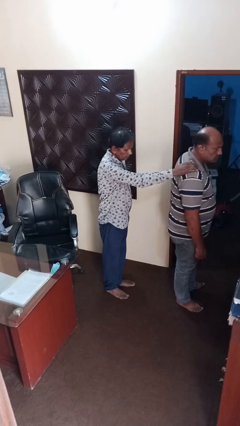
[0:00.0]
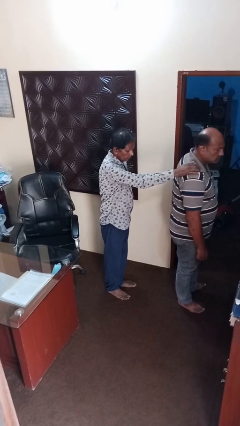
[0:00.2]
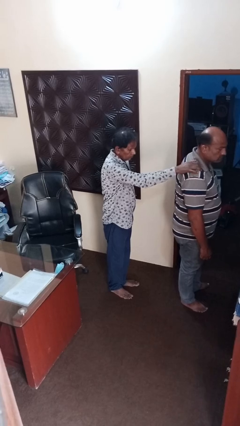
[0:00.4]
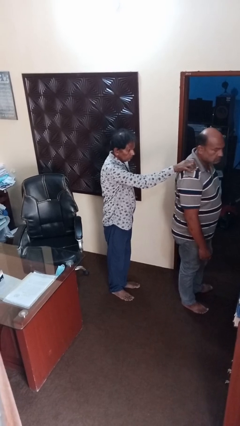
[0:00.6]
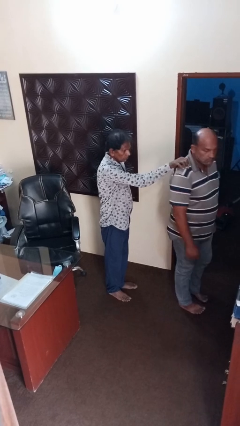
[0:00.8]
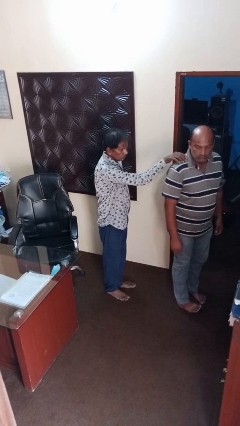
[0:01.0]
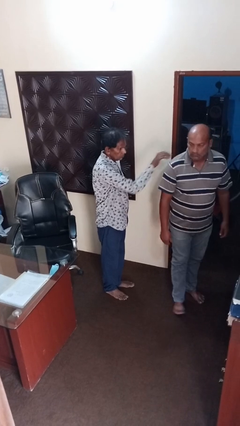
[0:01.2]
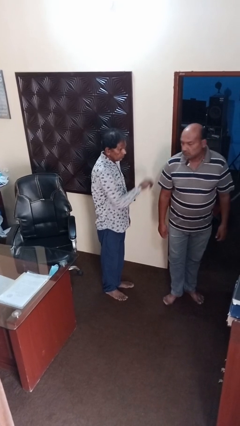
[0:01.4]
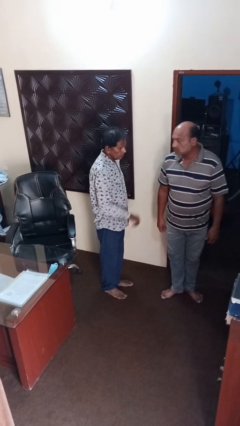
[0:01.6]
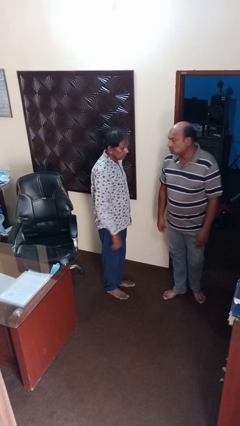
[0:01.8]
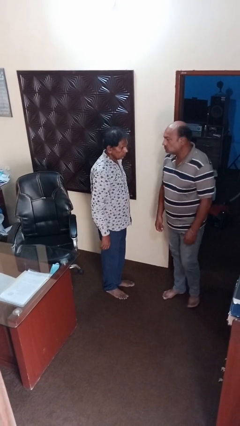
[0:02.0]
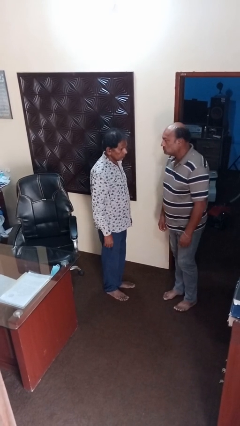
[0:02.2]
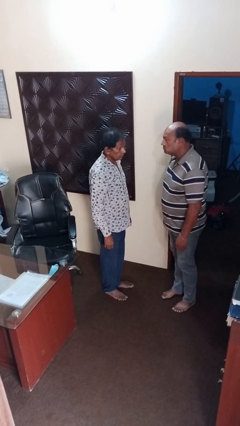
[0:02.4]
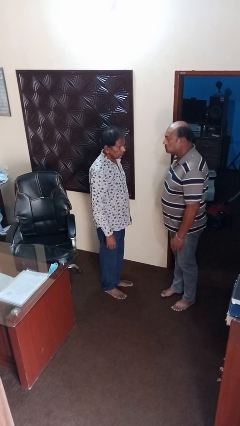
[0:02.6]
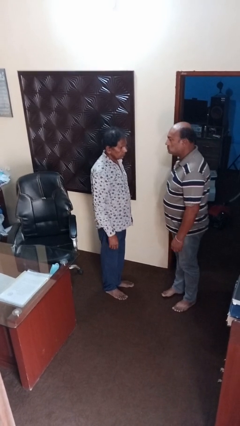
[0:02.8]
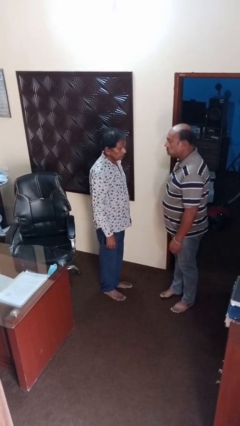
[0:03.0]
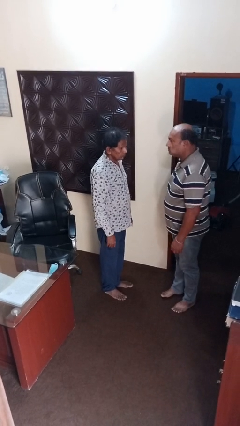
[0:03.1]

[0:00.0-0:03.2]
person spins person around
